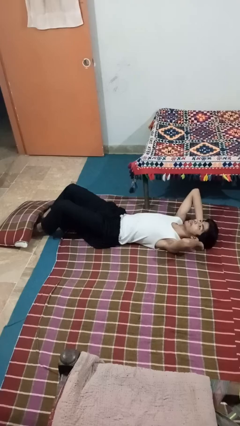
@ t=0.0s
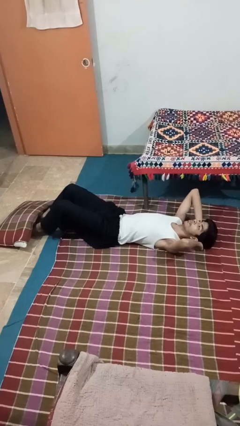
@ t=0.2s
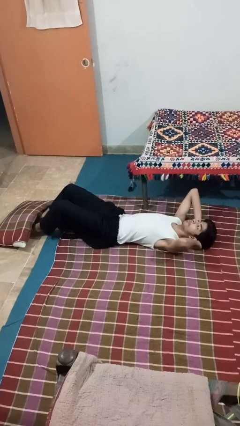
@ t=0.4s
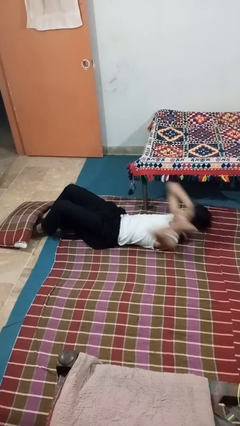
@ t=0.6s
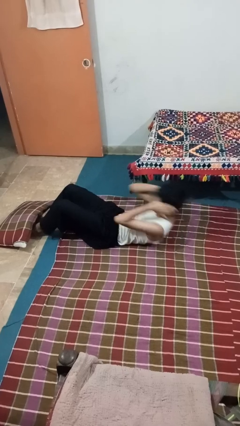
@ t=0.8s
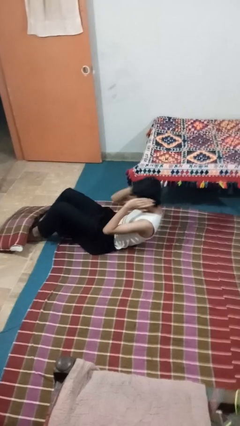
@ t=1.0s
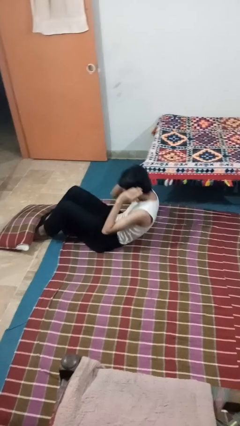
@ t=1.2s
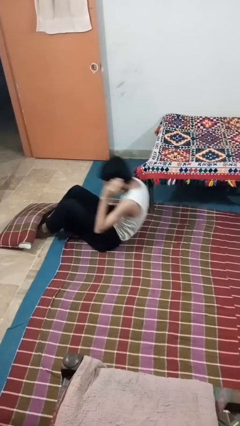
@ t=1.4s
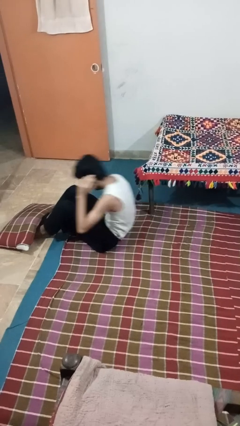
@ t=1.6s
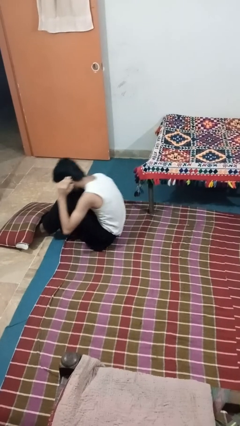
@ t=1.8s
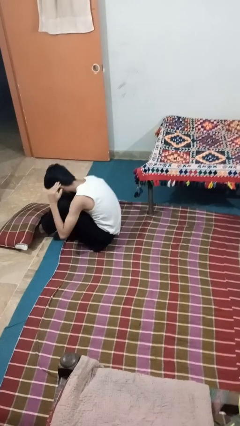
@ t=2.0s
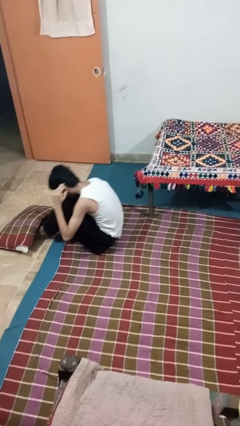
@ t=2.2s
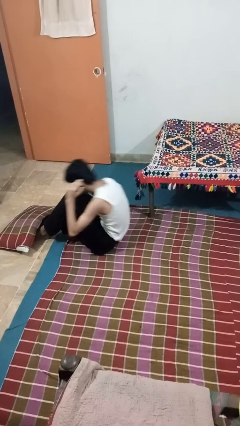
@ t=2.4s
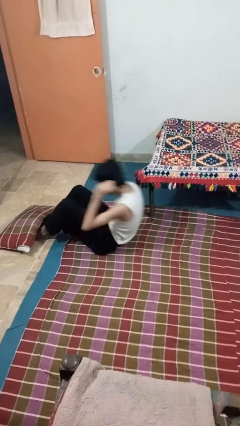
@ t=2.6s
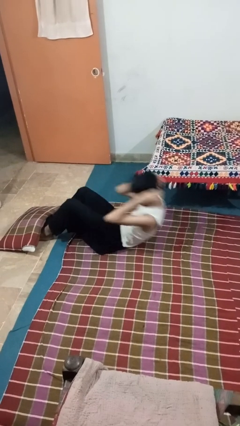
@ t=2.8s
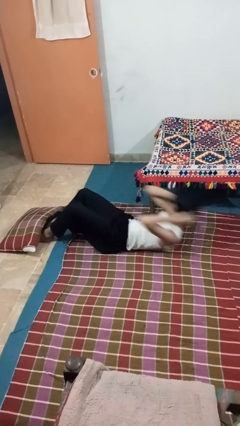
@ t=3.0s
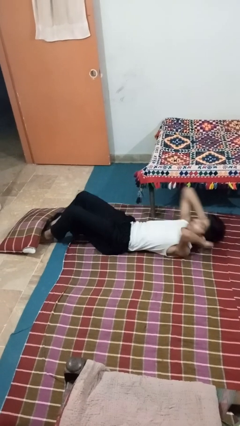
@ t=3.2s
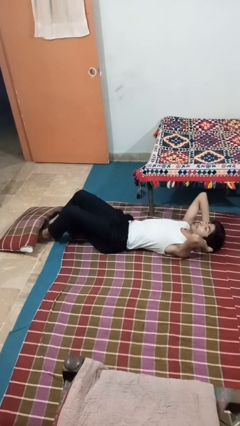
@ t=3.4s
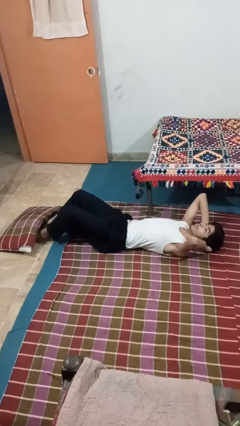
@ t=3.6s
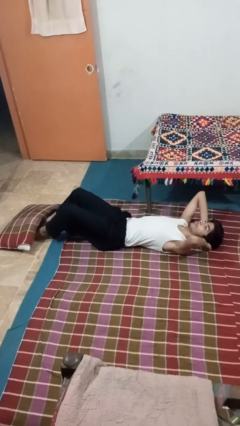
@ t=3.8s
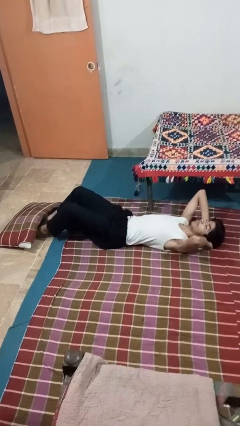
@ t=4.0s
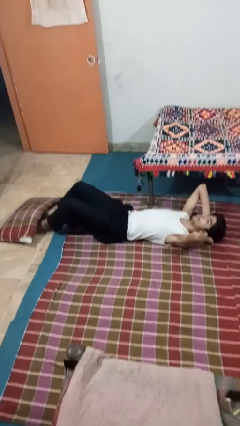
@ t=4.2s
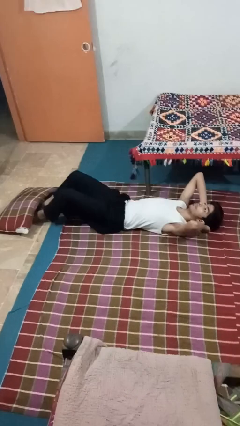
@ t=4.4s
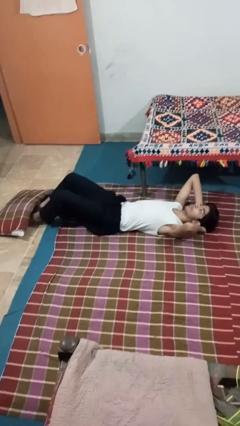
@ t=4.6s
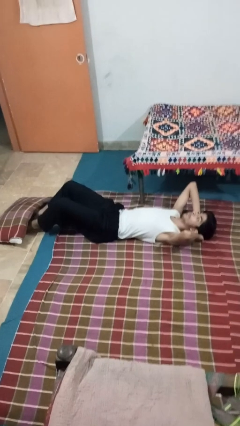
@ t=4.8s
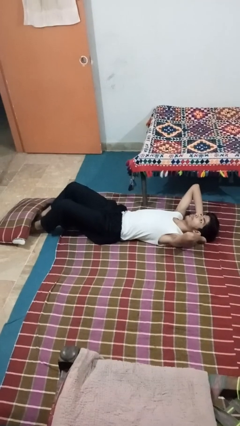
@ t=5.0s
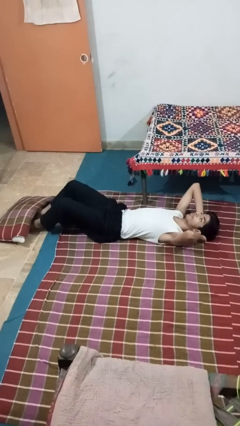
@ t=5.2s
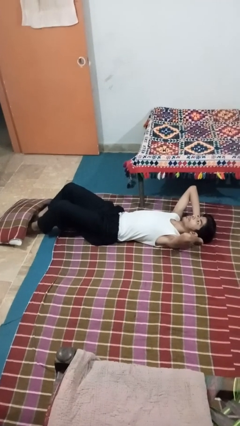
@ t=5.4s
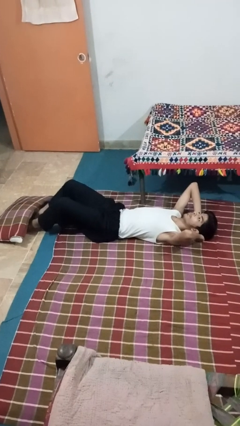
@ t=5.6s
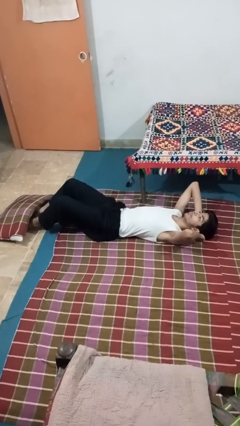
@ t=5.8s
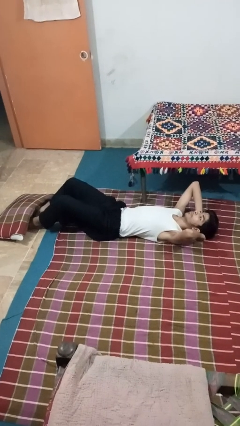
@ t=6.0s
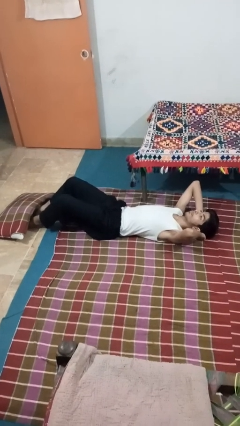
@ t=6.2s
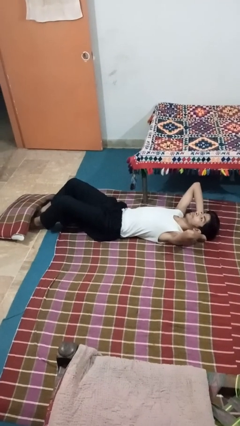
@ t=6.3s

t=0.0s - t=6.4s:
person exercises with situp

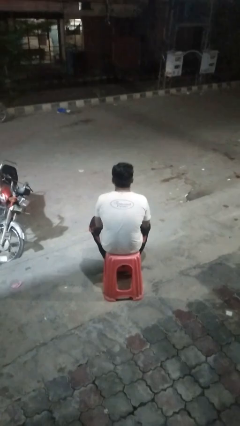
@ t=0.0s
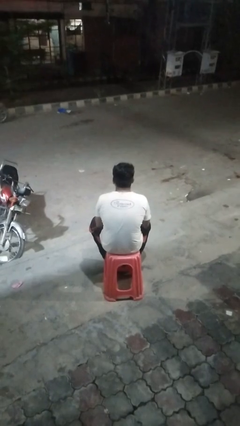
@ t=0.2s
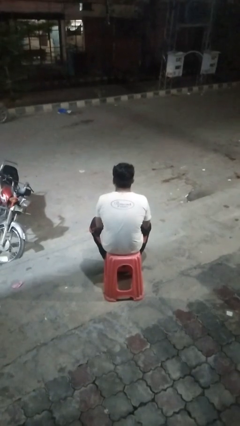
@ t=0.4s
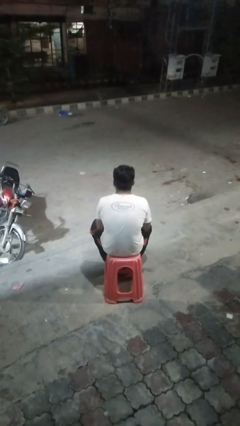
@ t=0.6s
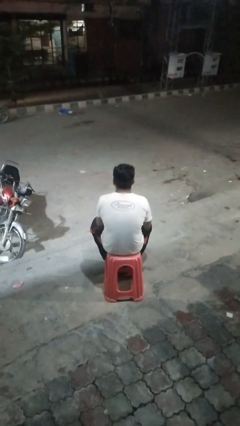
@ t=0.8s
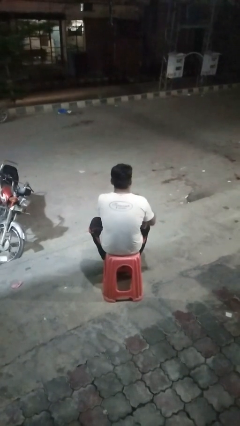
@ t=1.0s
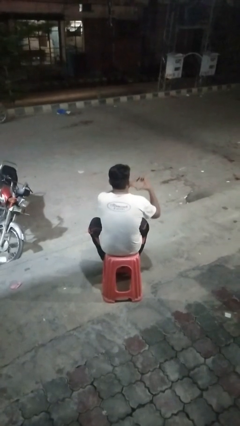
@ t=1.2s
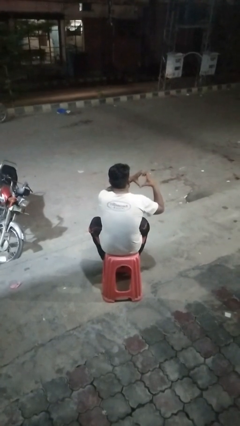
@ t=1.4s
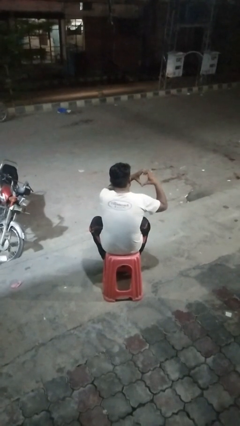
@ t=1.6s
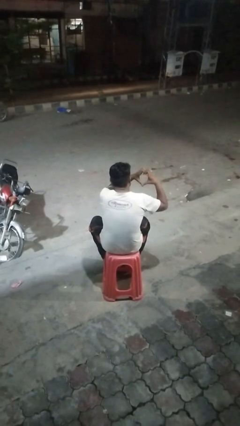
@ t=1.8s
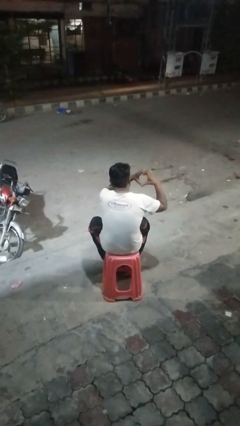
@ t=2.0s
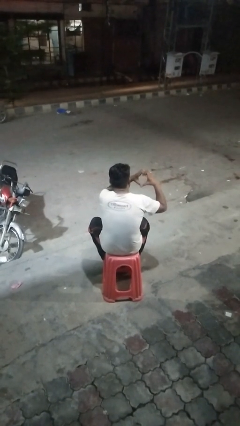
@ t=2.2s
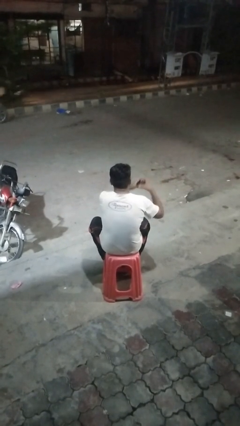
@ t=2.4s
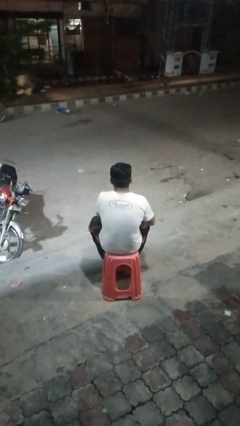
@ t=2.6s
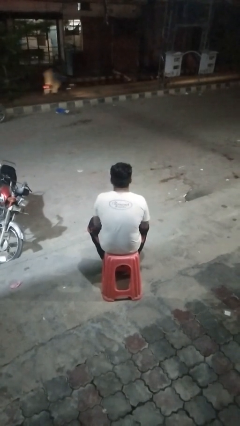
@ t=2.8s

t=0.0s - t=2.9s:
person gestures heart

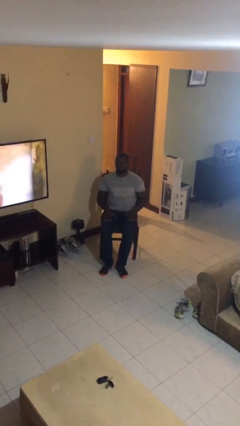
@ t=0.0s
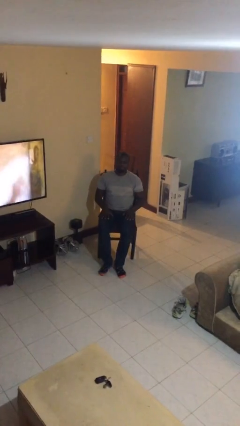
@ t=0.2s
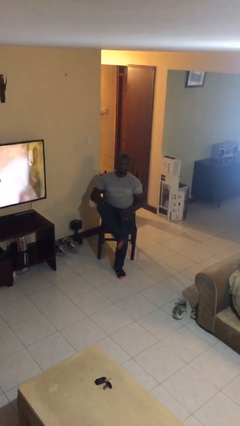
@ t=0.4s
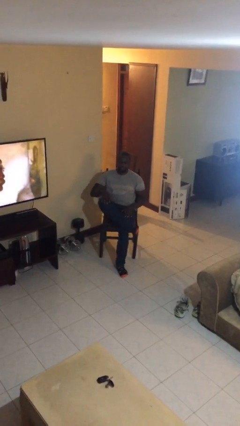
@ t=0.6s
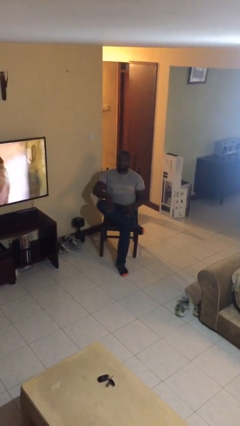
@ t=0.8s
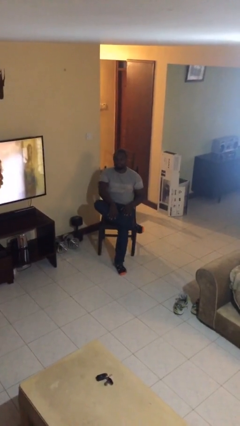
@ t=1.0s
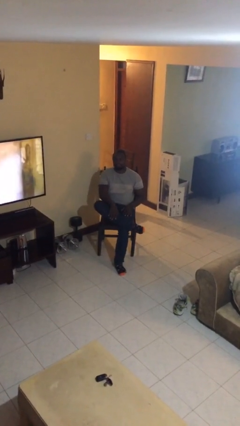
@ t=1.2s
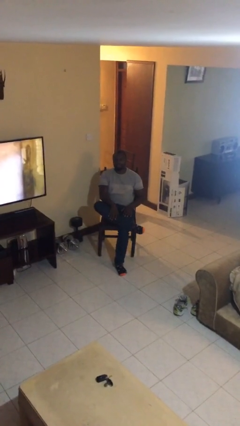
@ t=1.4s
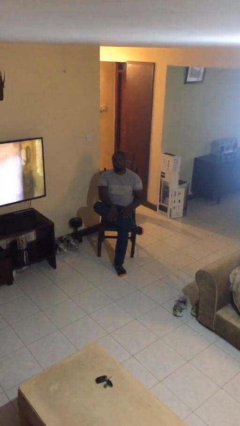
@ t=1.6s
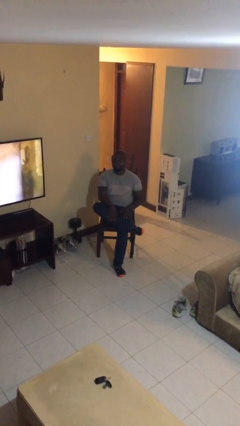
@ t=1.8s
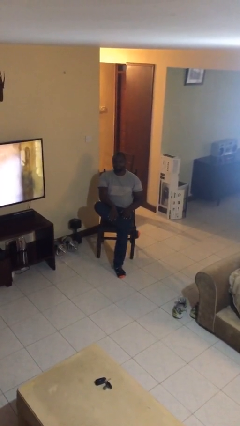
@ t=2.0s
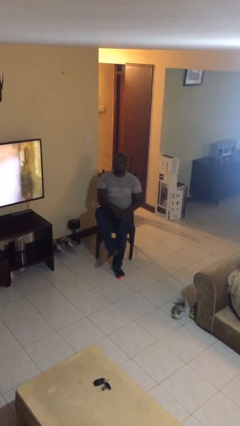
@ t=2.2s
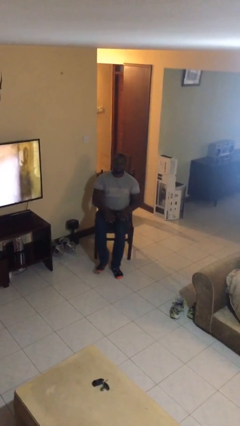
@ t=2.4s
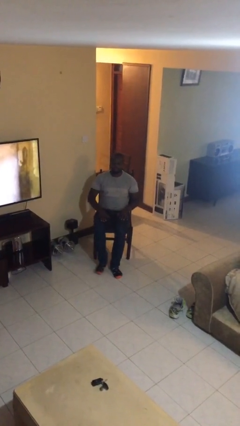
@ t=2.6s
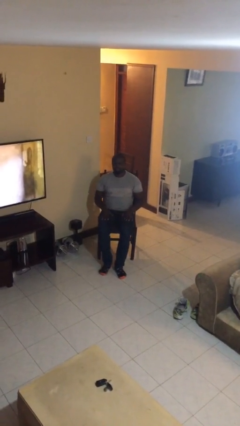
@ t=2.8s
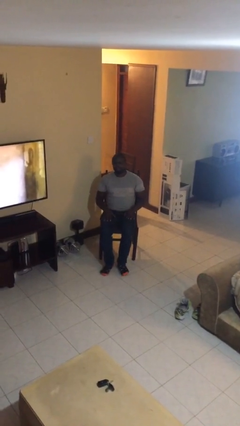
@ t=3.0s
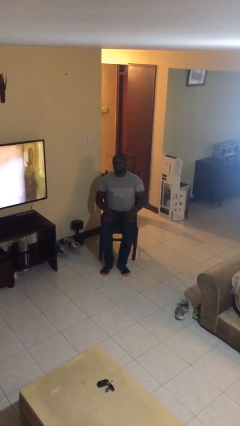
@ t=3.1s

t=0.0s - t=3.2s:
person crosses legs

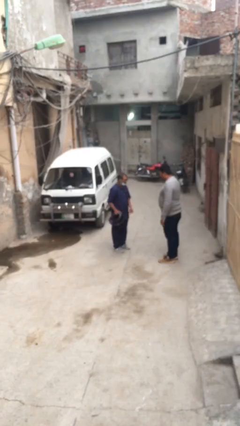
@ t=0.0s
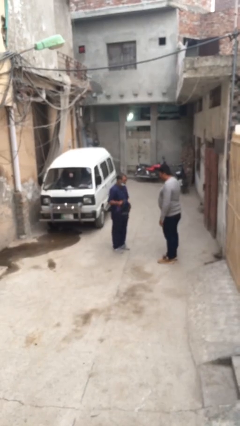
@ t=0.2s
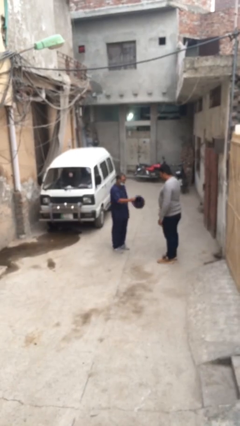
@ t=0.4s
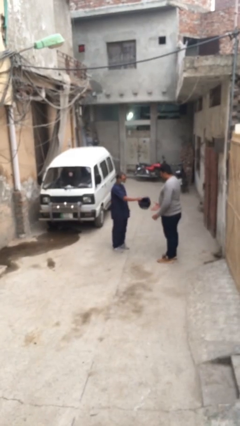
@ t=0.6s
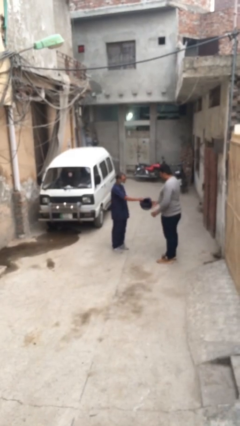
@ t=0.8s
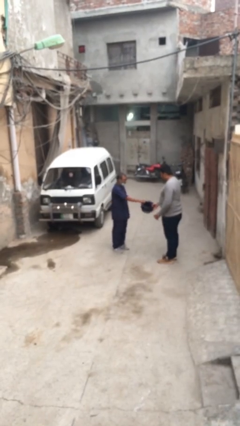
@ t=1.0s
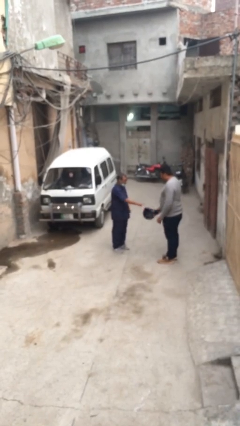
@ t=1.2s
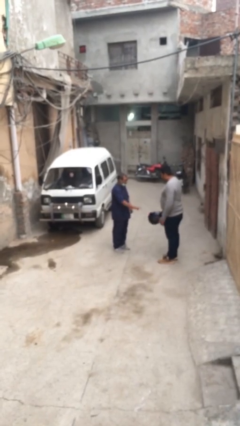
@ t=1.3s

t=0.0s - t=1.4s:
person transfers object to person

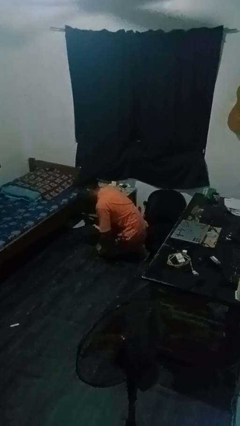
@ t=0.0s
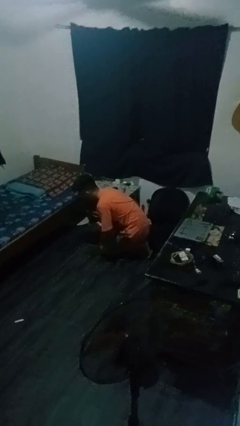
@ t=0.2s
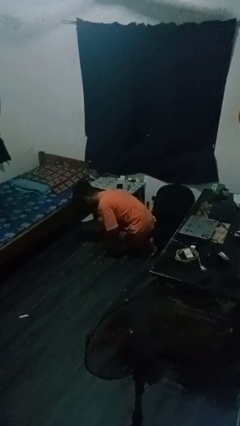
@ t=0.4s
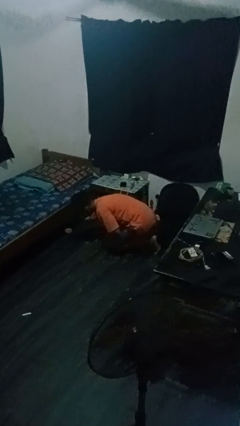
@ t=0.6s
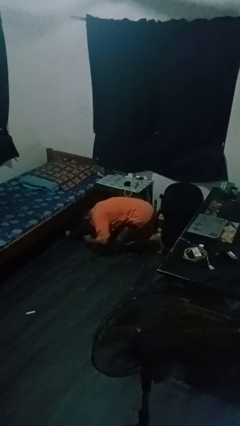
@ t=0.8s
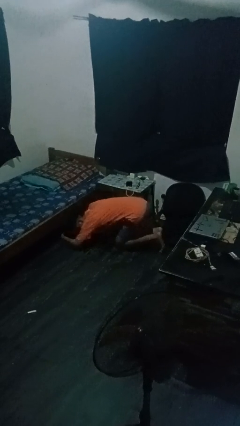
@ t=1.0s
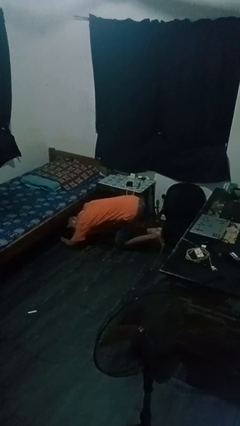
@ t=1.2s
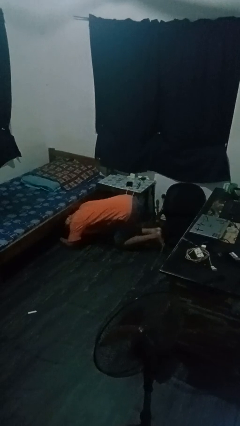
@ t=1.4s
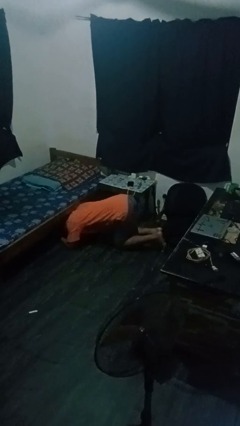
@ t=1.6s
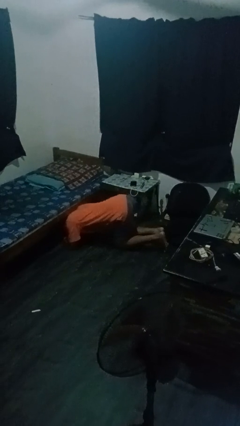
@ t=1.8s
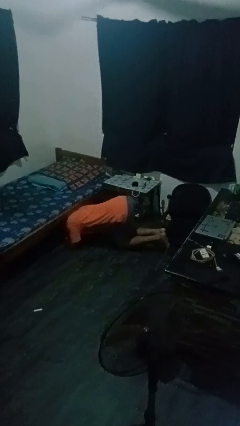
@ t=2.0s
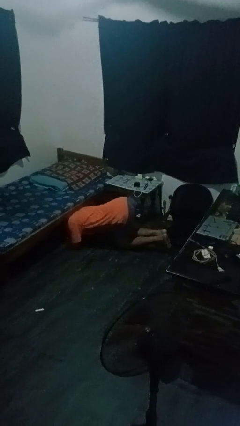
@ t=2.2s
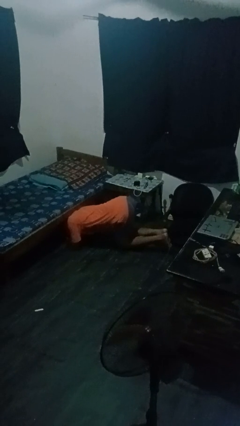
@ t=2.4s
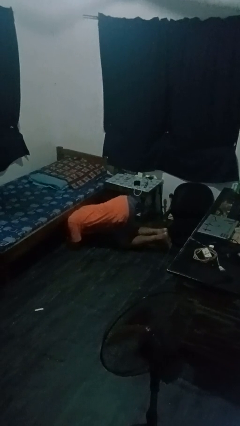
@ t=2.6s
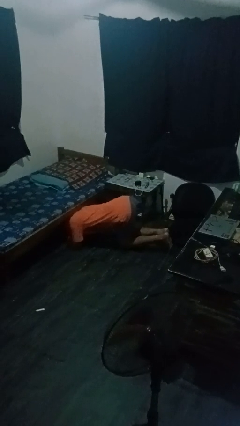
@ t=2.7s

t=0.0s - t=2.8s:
person searches under bed

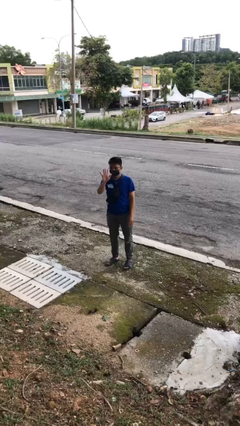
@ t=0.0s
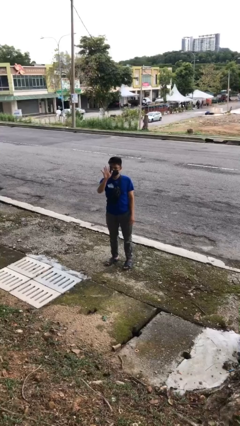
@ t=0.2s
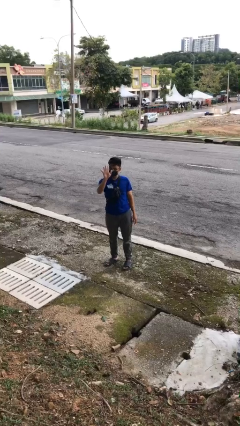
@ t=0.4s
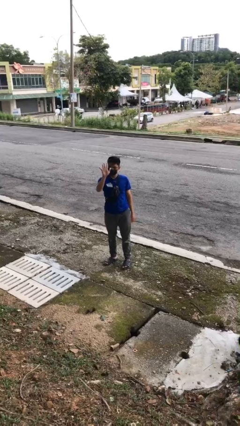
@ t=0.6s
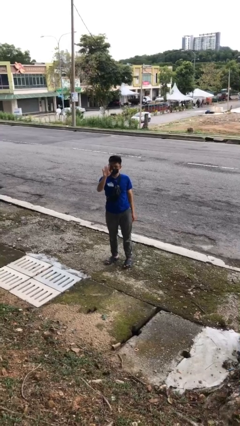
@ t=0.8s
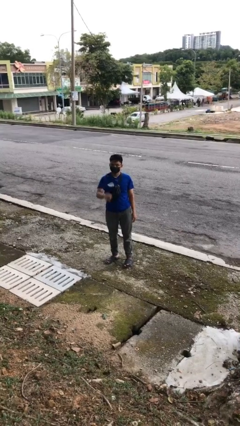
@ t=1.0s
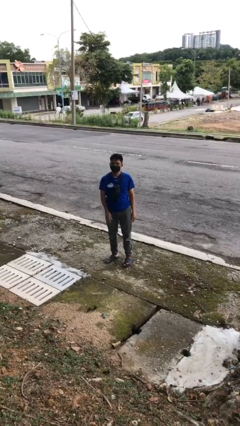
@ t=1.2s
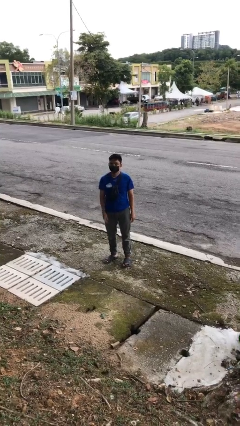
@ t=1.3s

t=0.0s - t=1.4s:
person gestures stop
